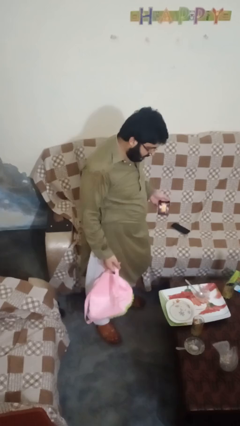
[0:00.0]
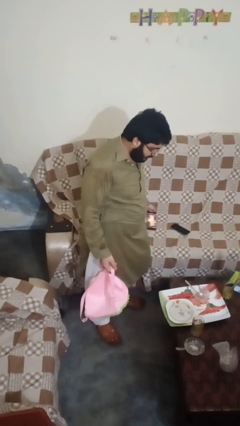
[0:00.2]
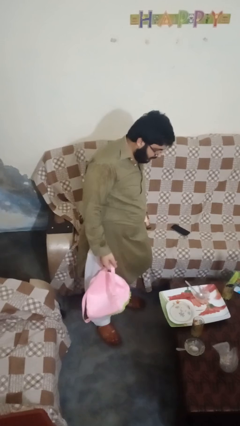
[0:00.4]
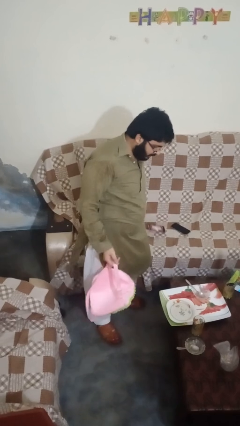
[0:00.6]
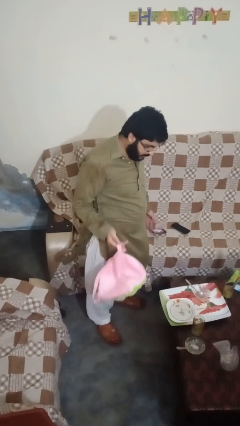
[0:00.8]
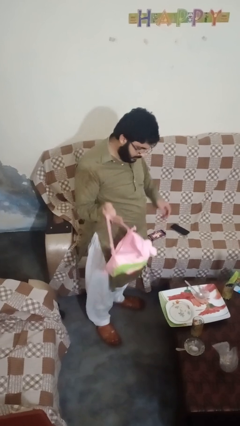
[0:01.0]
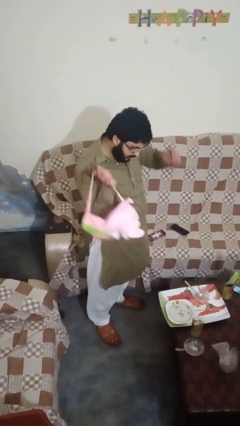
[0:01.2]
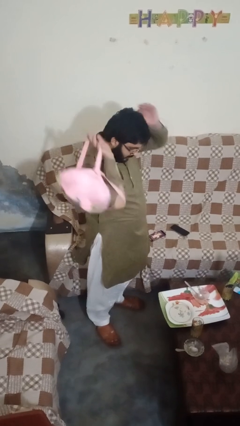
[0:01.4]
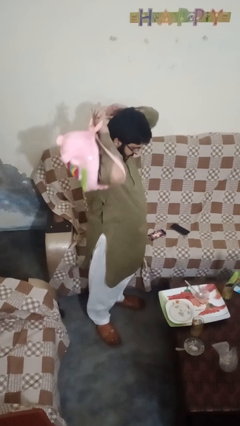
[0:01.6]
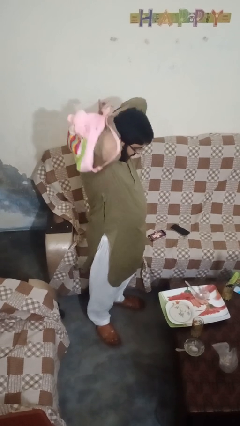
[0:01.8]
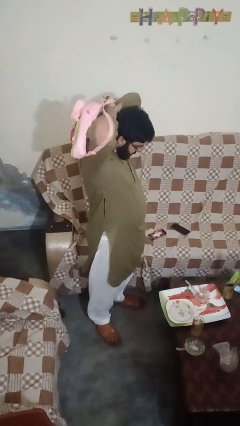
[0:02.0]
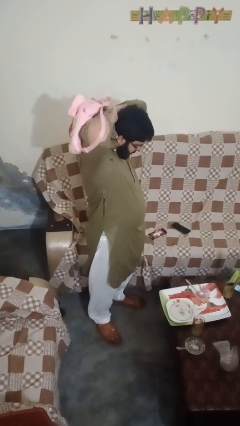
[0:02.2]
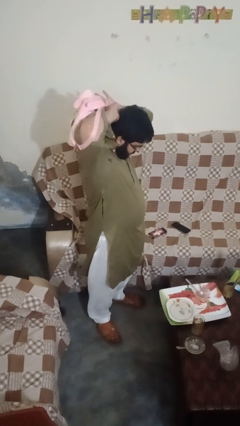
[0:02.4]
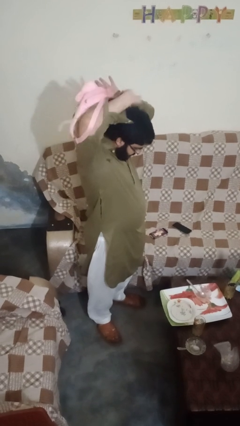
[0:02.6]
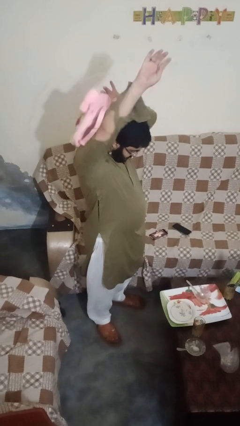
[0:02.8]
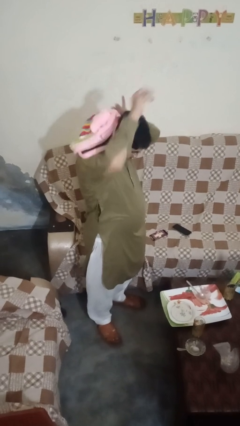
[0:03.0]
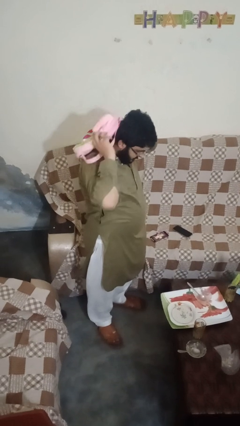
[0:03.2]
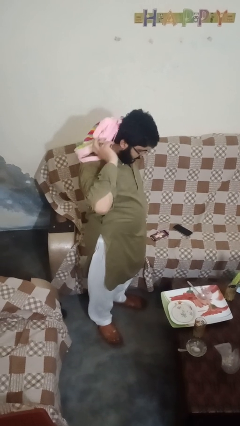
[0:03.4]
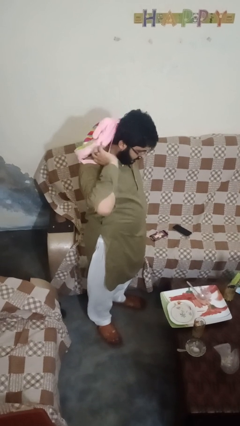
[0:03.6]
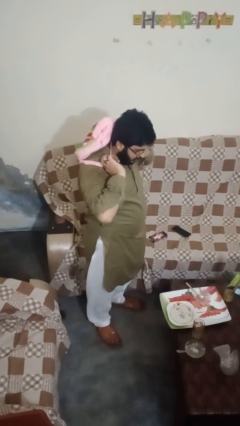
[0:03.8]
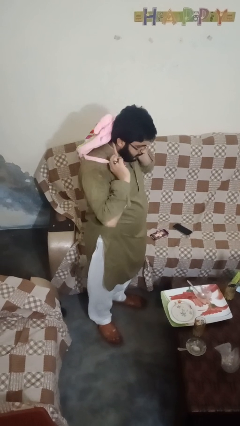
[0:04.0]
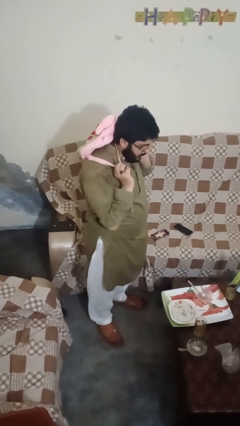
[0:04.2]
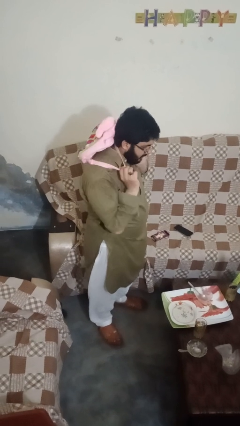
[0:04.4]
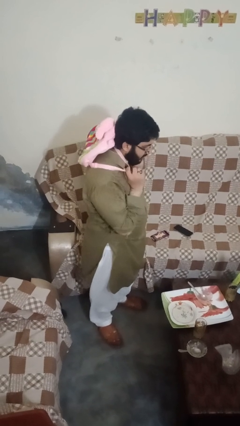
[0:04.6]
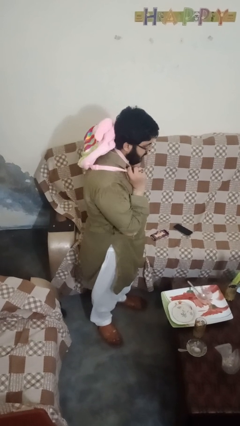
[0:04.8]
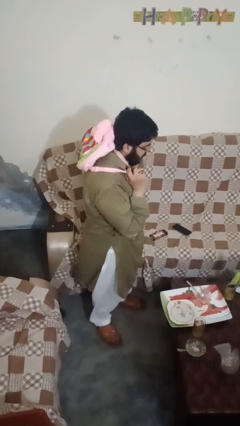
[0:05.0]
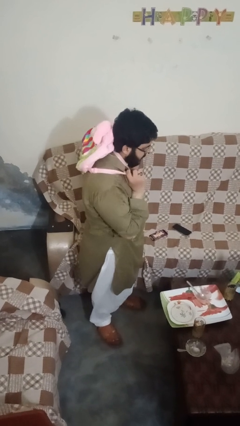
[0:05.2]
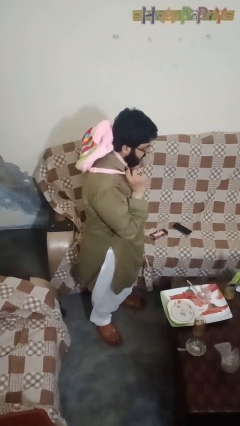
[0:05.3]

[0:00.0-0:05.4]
person puts on backpack

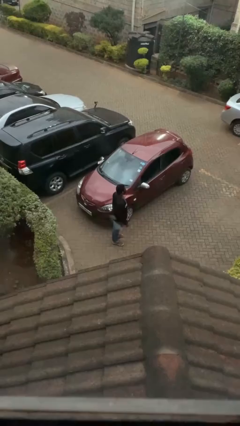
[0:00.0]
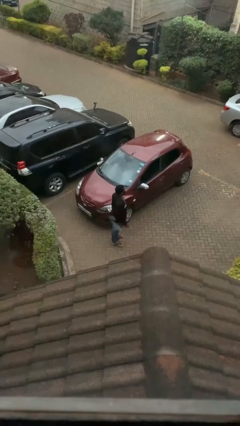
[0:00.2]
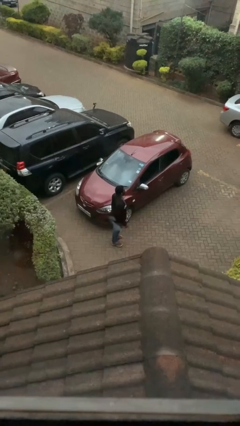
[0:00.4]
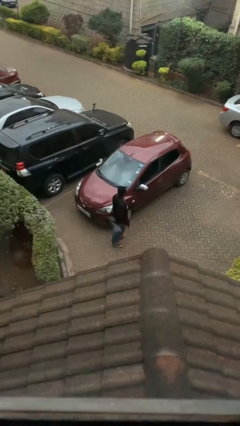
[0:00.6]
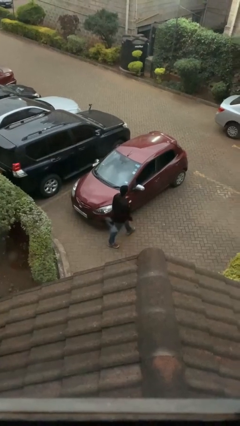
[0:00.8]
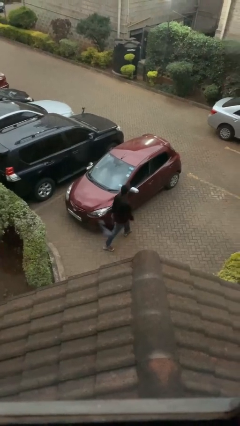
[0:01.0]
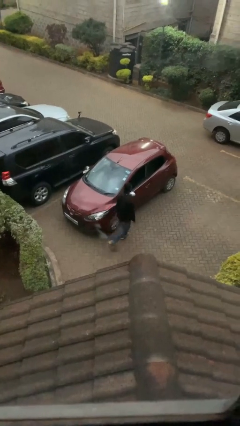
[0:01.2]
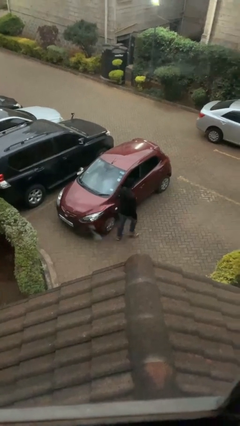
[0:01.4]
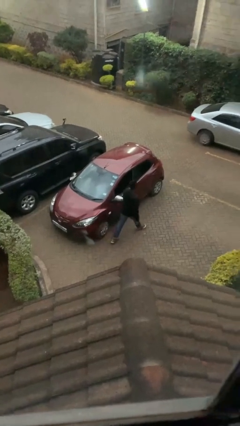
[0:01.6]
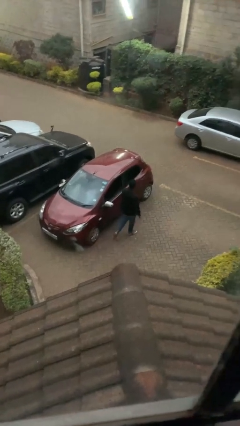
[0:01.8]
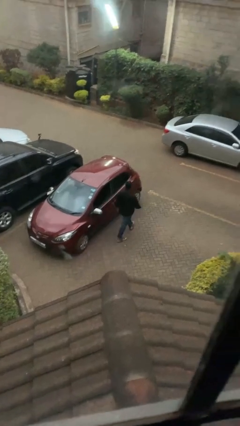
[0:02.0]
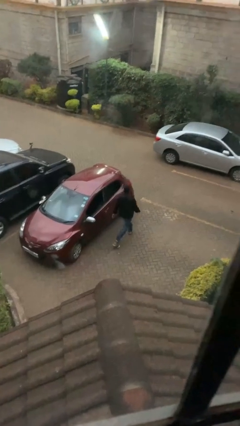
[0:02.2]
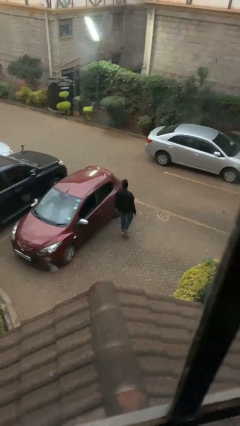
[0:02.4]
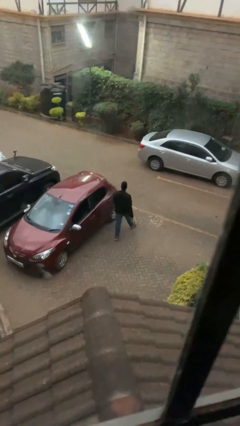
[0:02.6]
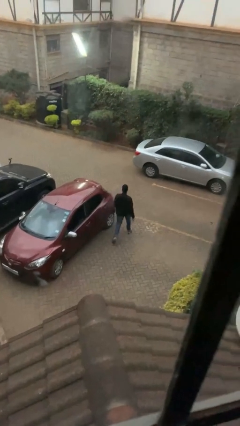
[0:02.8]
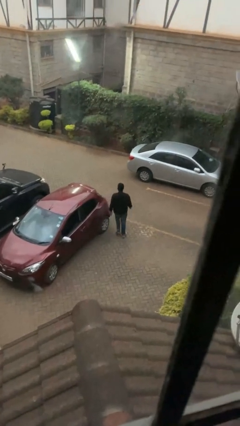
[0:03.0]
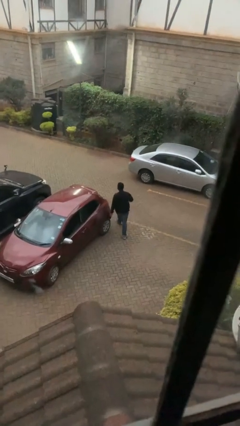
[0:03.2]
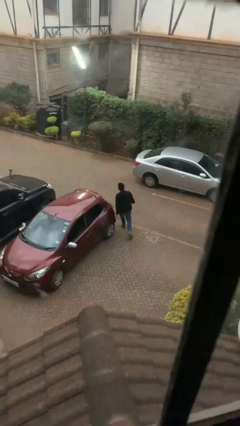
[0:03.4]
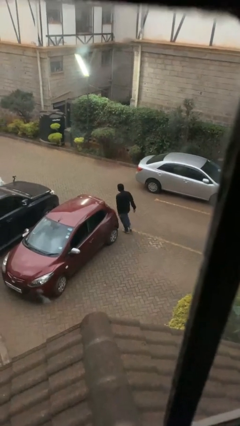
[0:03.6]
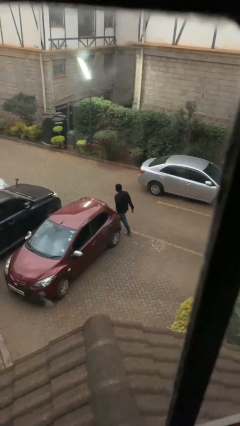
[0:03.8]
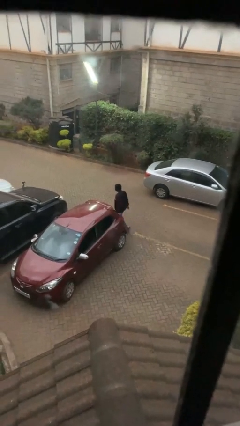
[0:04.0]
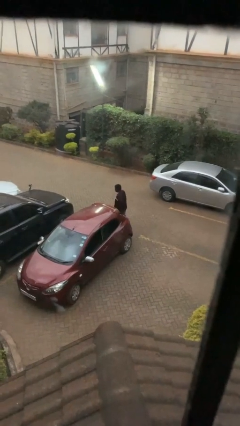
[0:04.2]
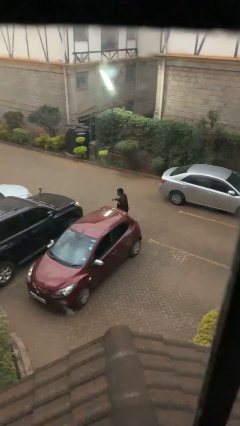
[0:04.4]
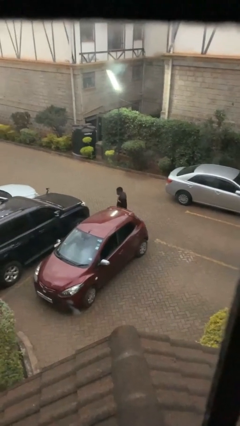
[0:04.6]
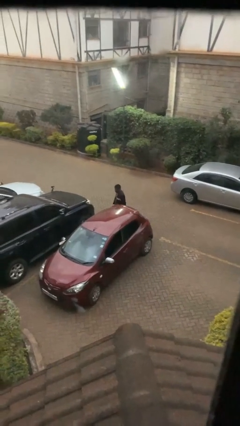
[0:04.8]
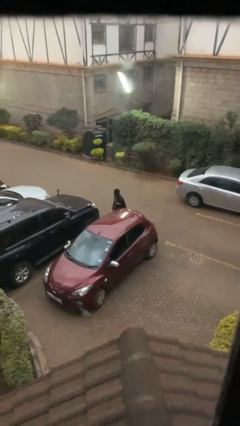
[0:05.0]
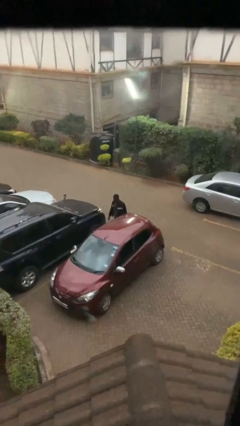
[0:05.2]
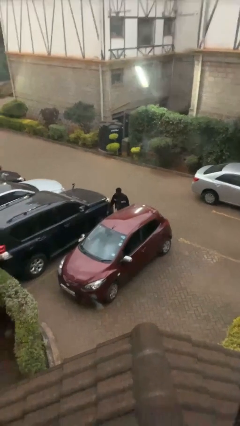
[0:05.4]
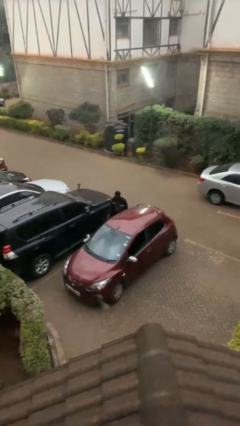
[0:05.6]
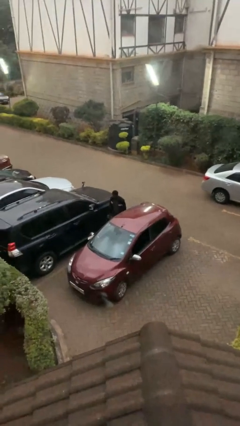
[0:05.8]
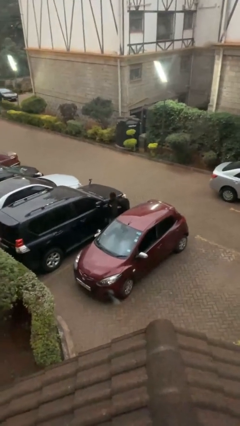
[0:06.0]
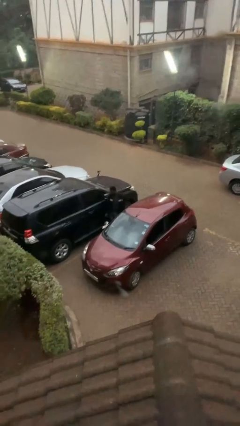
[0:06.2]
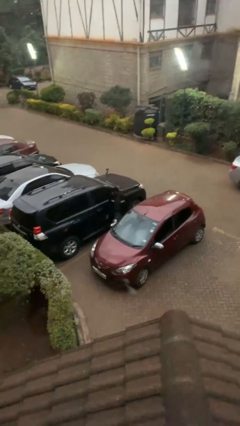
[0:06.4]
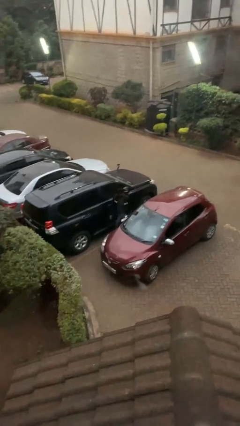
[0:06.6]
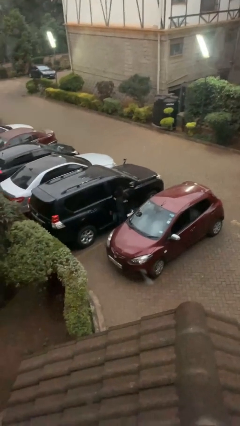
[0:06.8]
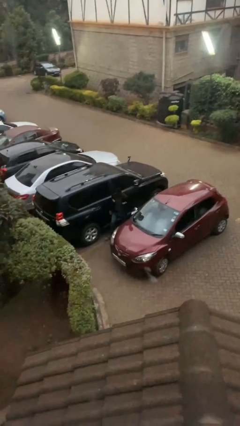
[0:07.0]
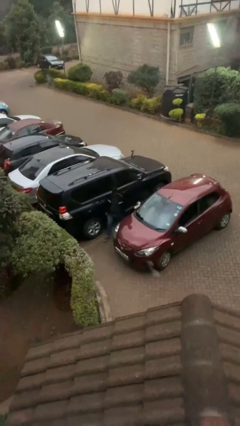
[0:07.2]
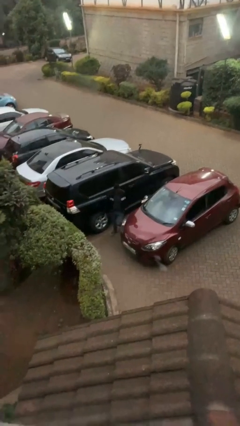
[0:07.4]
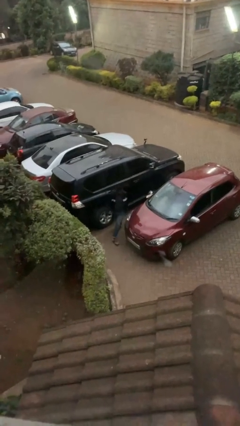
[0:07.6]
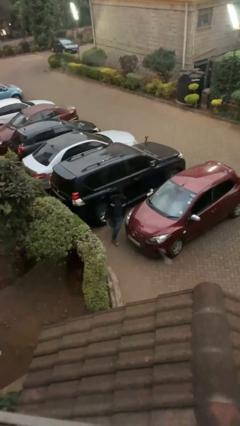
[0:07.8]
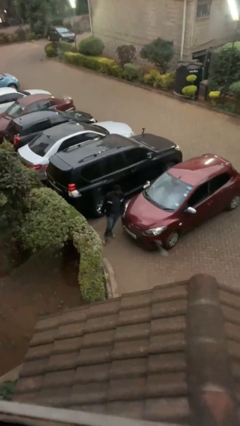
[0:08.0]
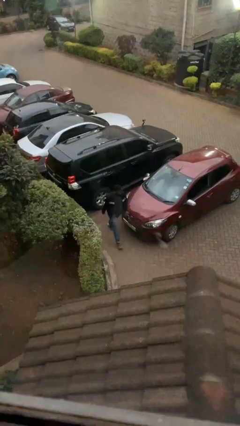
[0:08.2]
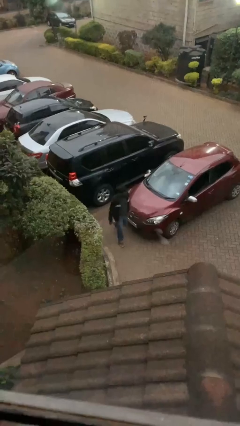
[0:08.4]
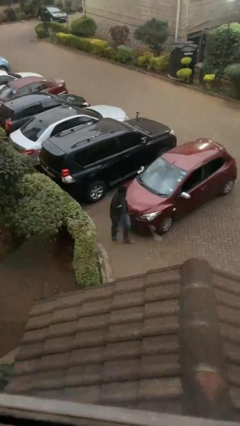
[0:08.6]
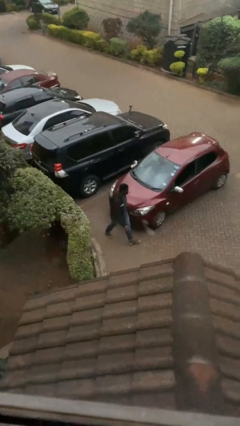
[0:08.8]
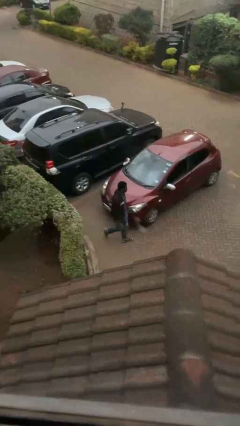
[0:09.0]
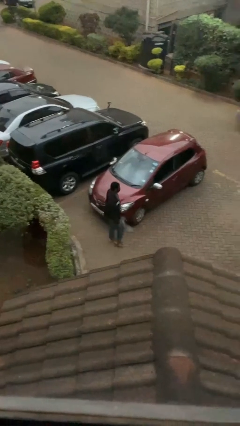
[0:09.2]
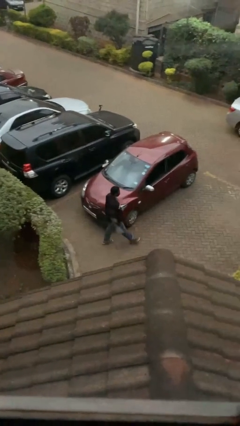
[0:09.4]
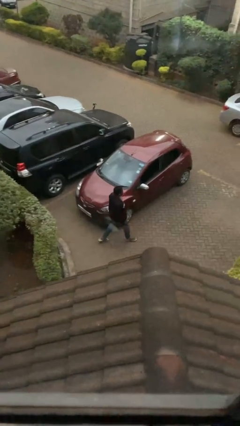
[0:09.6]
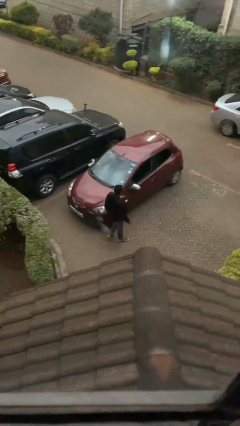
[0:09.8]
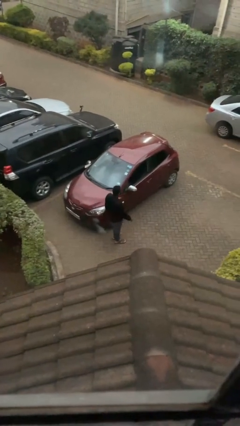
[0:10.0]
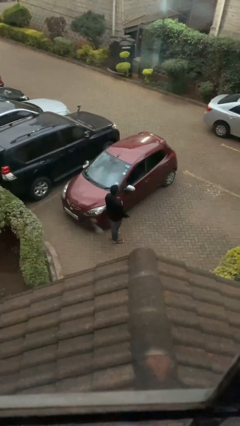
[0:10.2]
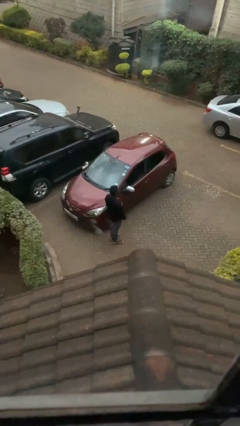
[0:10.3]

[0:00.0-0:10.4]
person walks around car

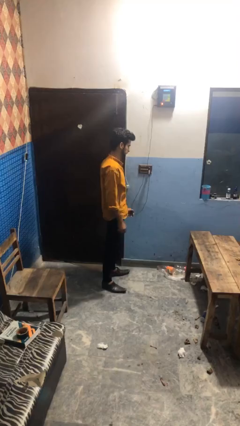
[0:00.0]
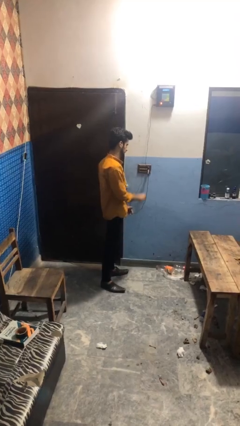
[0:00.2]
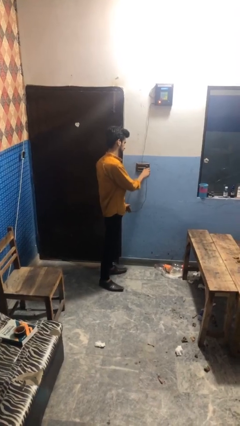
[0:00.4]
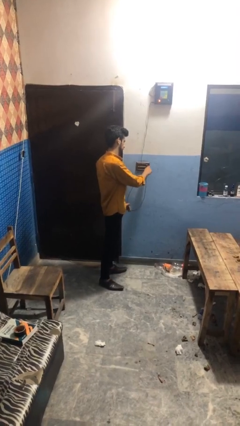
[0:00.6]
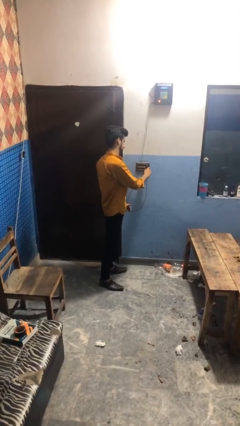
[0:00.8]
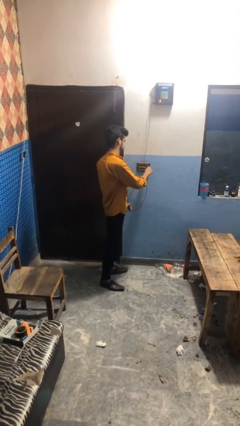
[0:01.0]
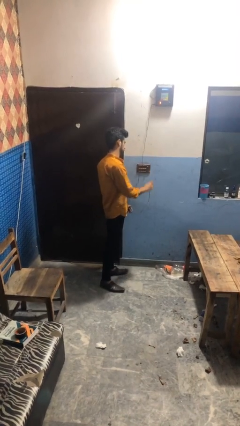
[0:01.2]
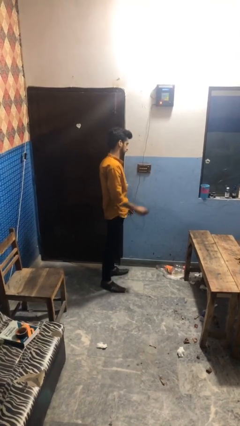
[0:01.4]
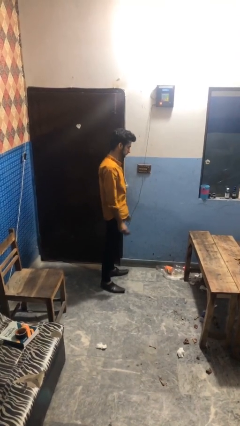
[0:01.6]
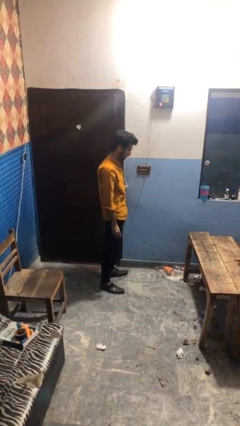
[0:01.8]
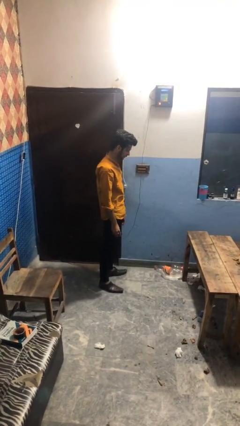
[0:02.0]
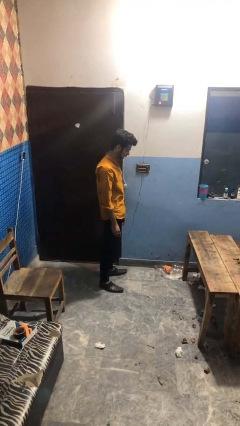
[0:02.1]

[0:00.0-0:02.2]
person unplugs from electrical socket
